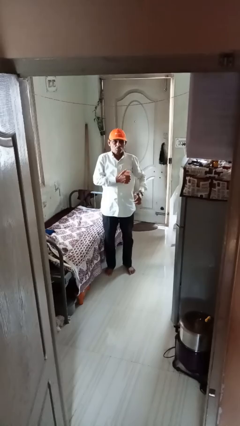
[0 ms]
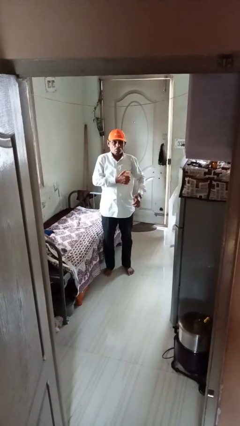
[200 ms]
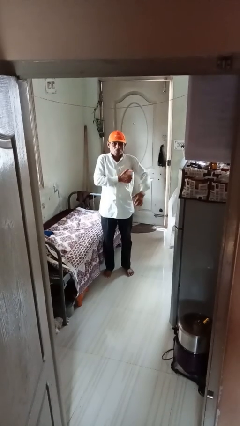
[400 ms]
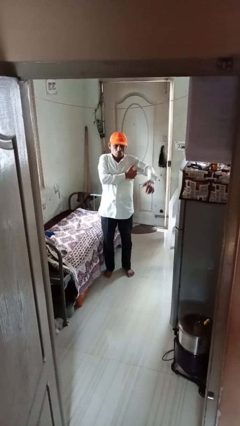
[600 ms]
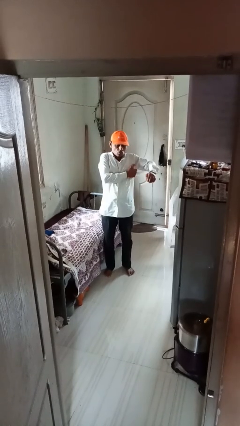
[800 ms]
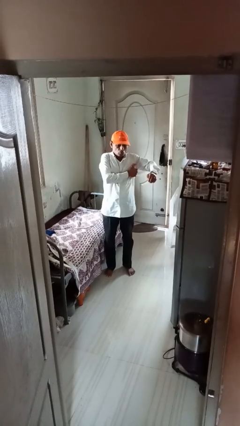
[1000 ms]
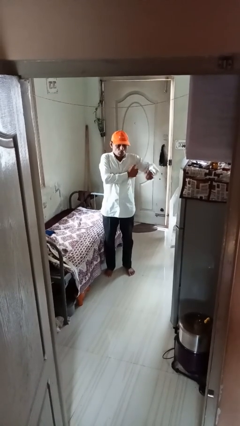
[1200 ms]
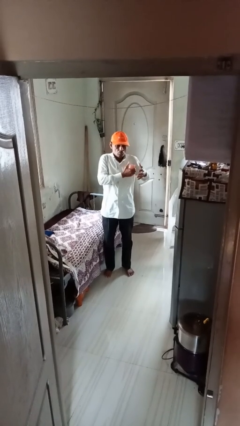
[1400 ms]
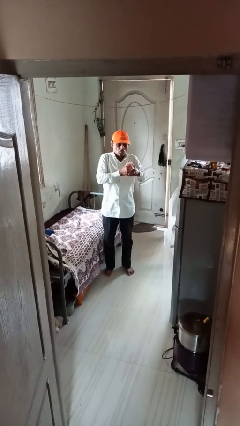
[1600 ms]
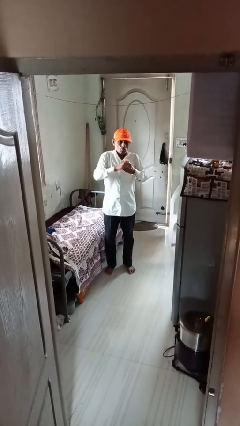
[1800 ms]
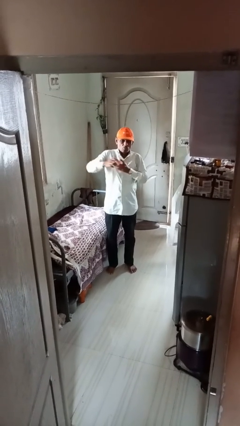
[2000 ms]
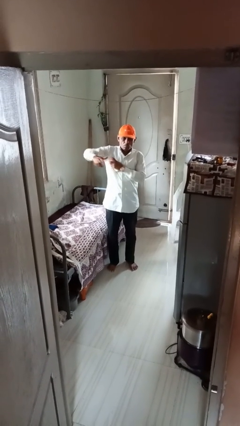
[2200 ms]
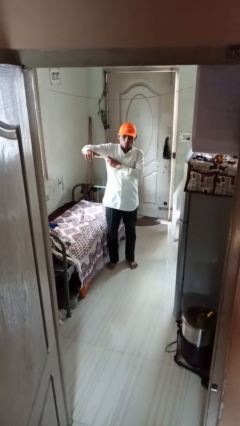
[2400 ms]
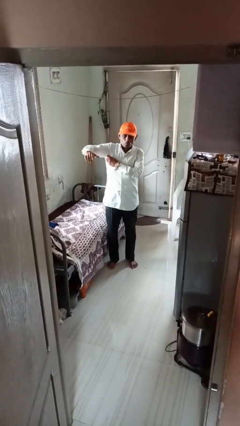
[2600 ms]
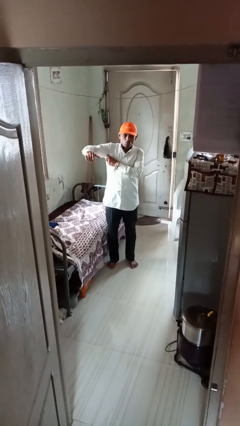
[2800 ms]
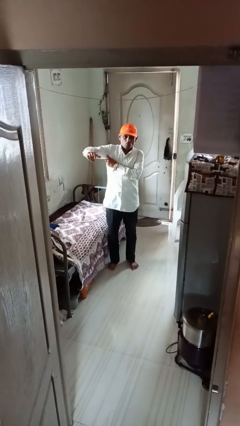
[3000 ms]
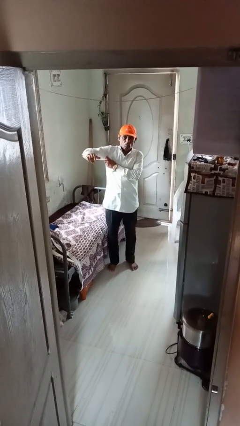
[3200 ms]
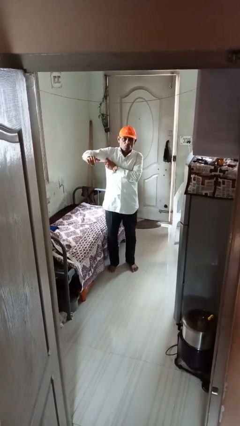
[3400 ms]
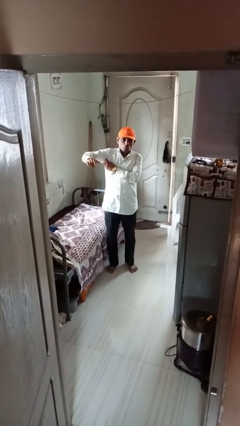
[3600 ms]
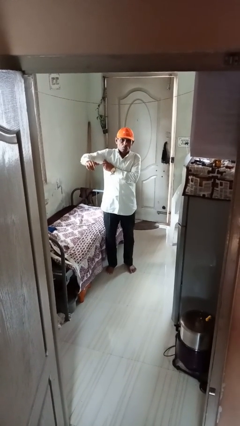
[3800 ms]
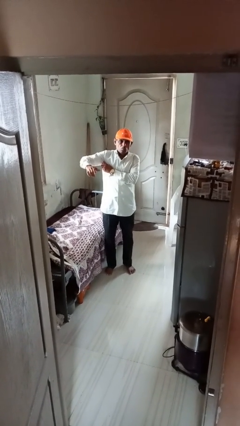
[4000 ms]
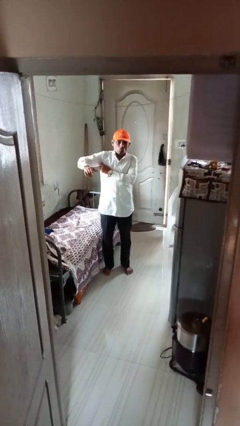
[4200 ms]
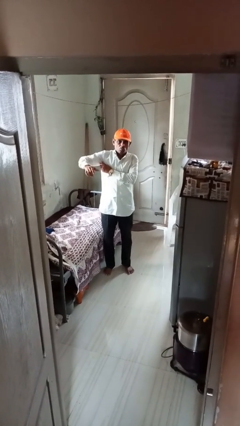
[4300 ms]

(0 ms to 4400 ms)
person applies deodorant

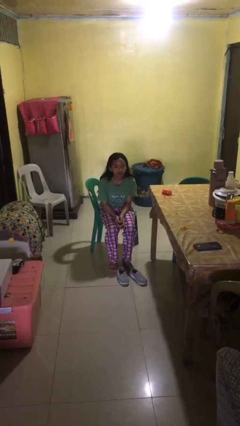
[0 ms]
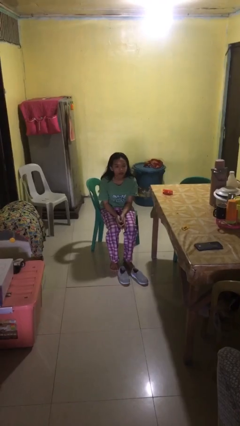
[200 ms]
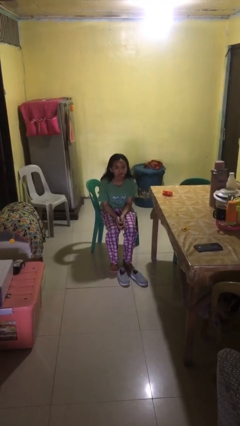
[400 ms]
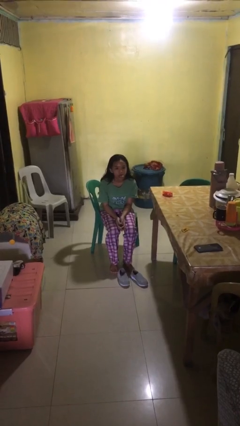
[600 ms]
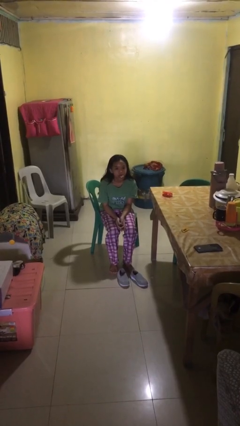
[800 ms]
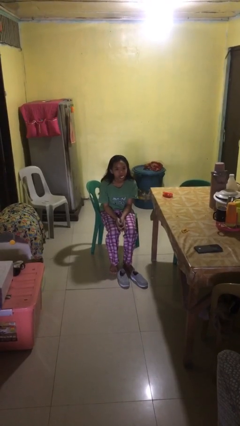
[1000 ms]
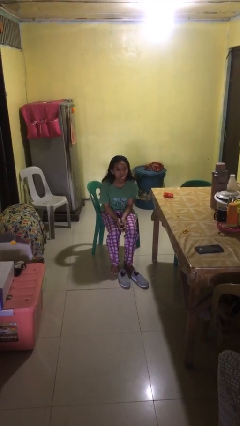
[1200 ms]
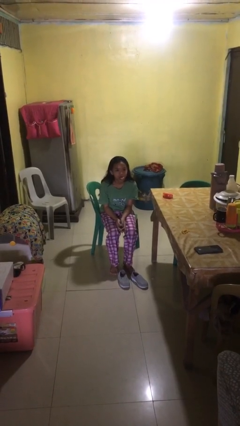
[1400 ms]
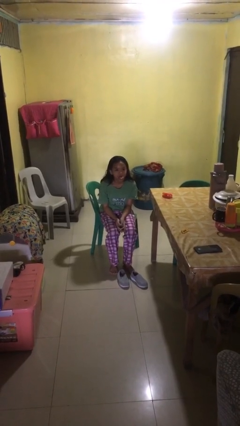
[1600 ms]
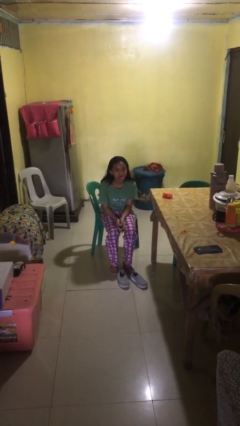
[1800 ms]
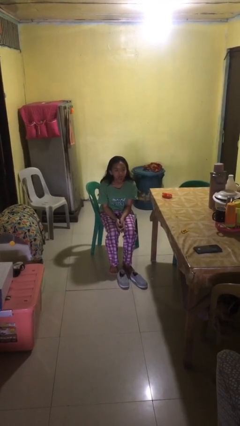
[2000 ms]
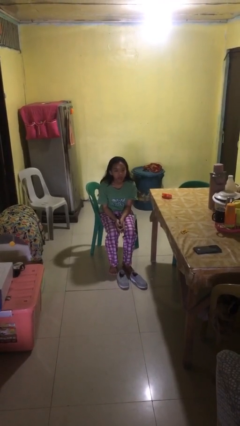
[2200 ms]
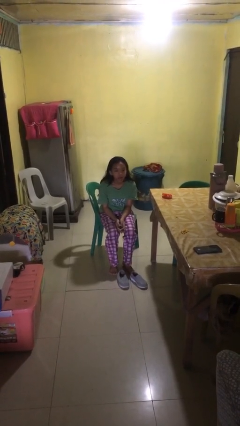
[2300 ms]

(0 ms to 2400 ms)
person sticks out tongue

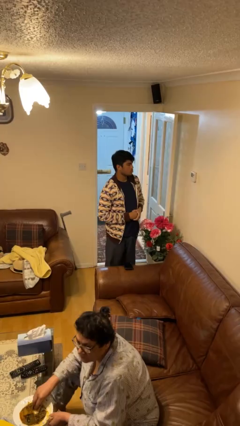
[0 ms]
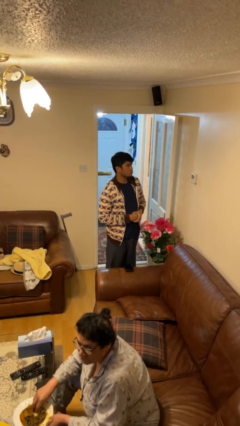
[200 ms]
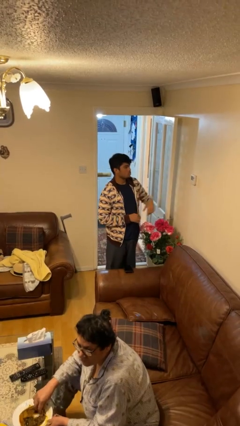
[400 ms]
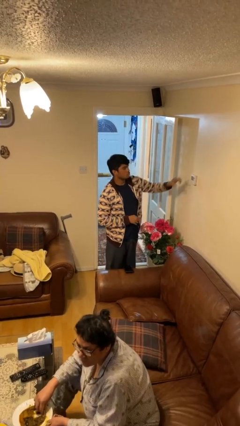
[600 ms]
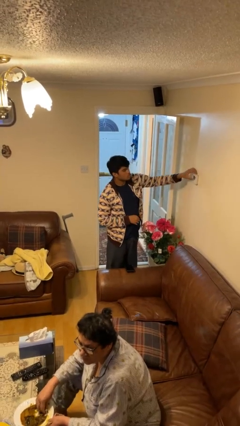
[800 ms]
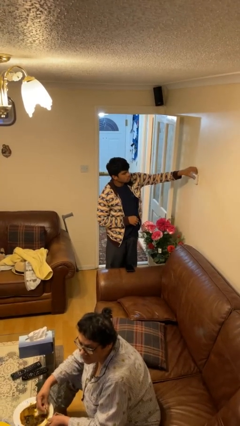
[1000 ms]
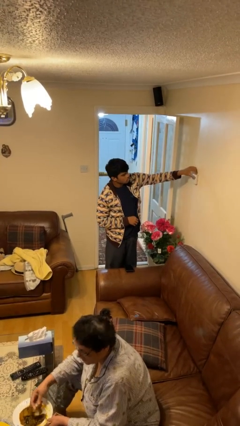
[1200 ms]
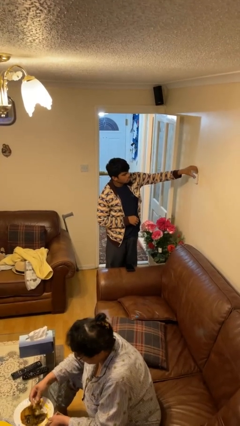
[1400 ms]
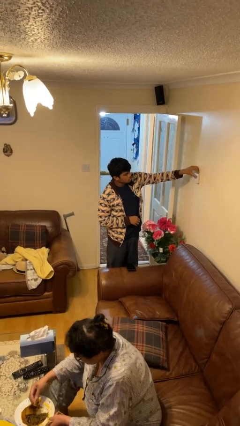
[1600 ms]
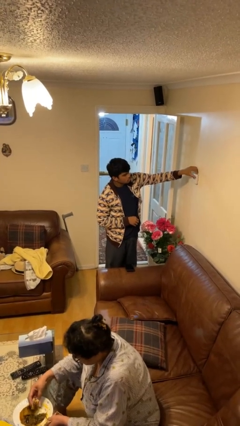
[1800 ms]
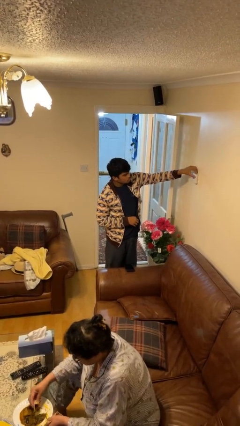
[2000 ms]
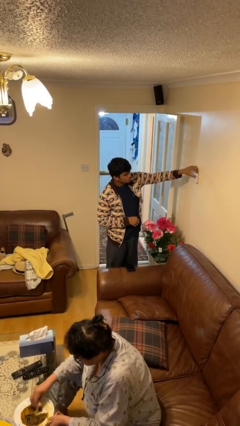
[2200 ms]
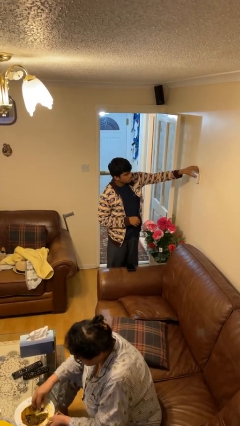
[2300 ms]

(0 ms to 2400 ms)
person adjusts thermostat

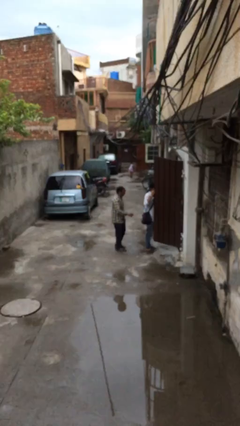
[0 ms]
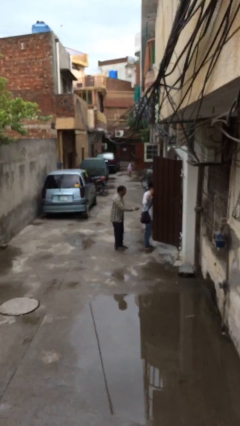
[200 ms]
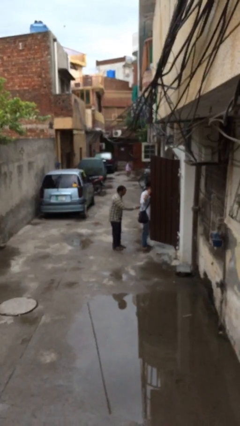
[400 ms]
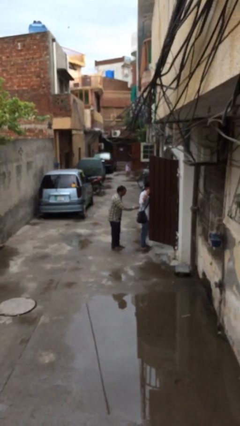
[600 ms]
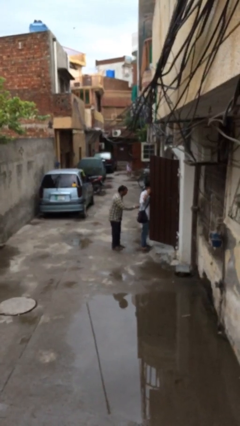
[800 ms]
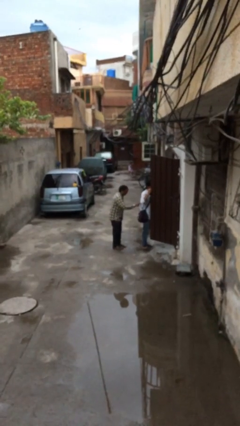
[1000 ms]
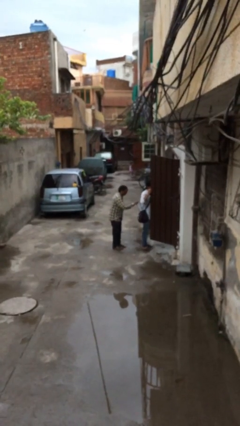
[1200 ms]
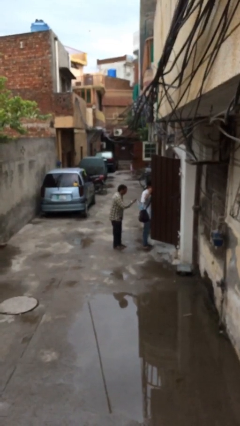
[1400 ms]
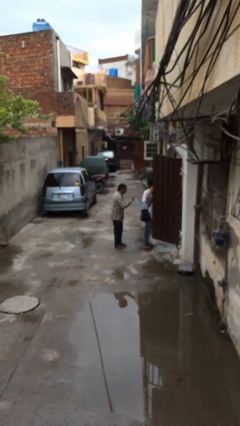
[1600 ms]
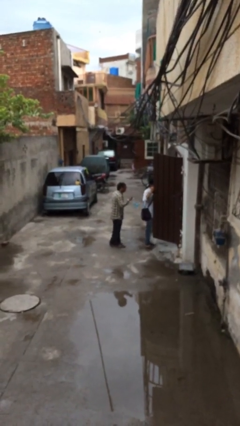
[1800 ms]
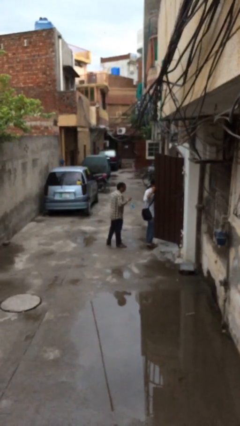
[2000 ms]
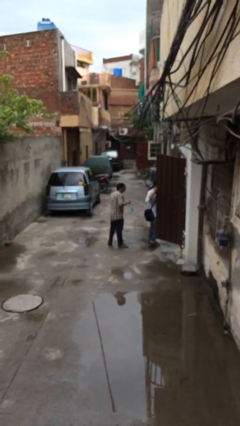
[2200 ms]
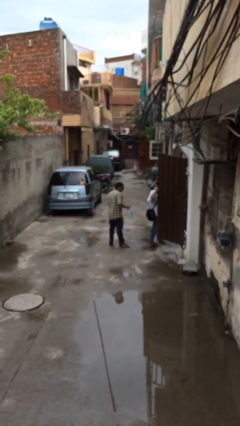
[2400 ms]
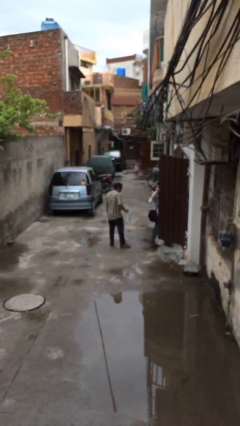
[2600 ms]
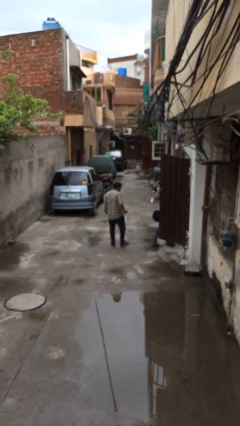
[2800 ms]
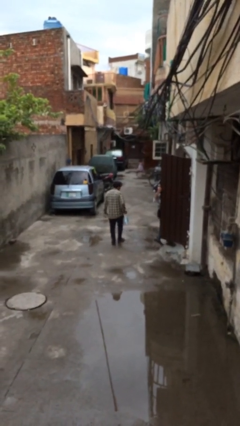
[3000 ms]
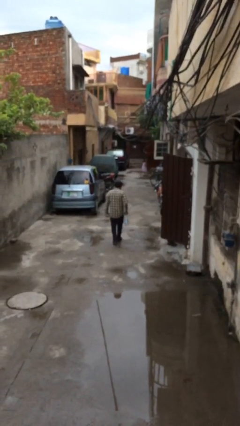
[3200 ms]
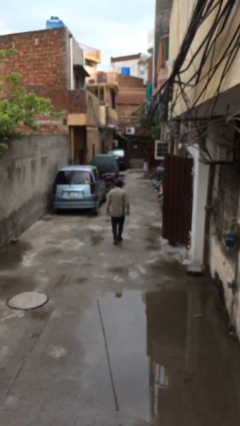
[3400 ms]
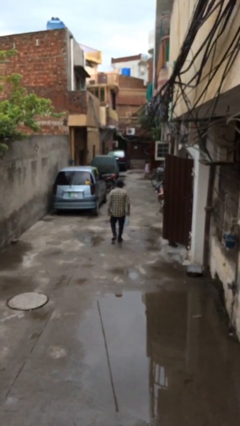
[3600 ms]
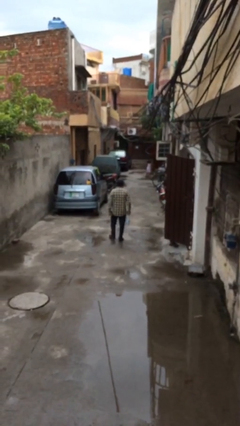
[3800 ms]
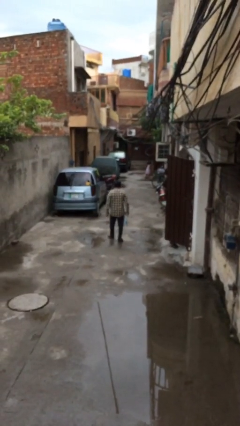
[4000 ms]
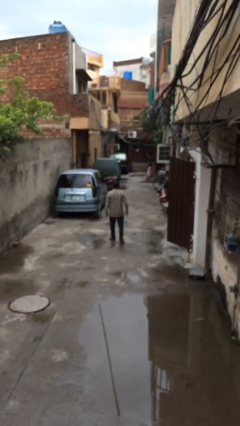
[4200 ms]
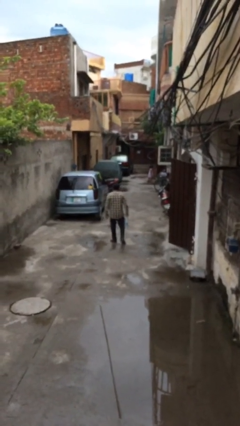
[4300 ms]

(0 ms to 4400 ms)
person steals object from person

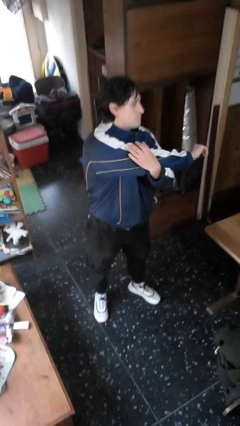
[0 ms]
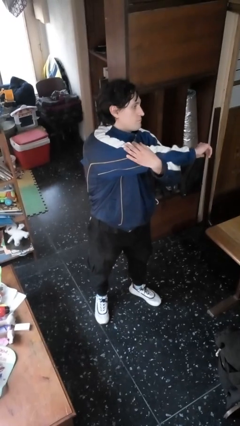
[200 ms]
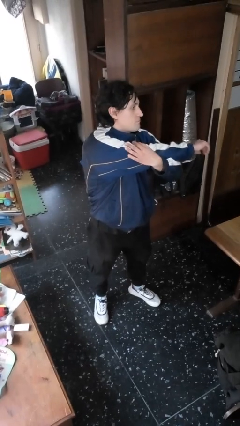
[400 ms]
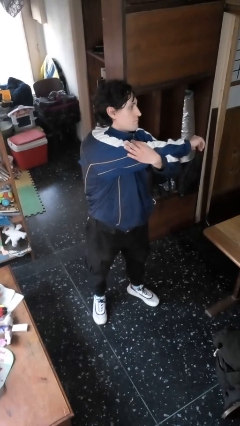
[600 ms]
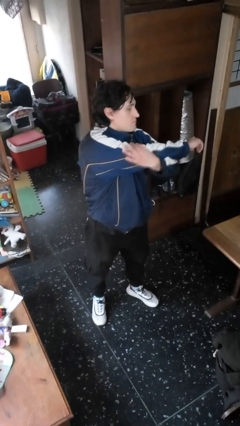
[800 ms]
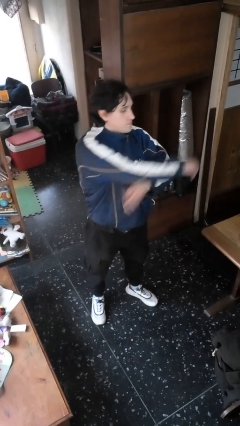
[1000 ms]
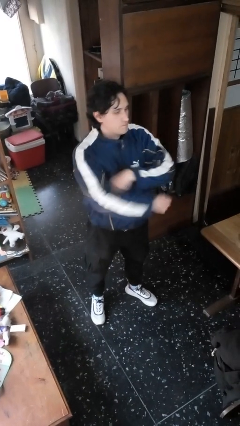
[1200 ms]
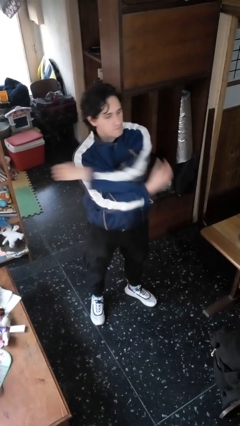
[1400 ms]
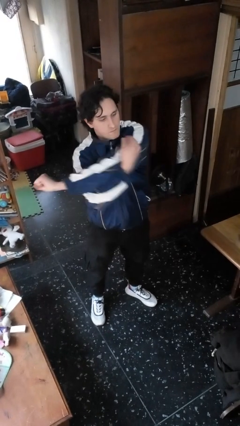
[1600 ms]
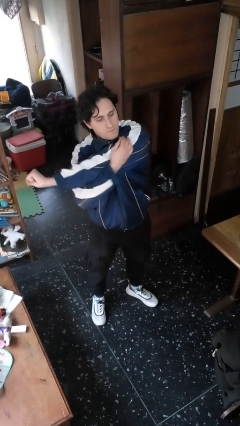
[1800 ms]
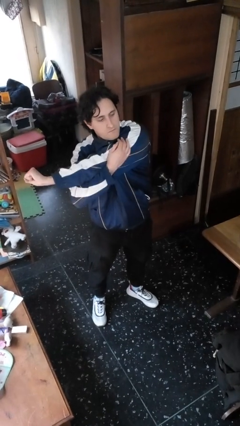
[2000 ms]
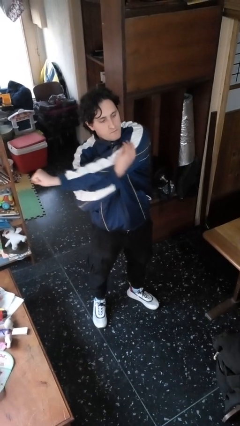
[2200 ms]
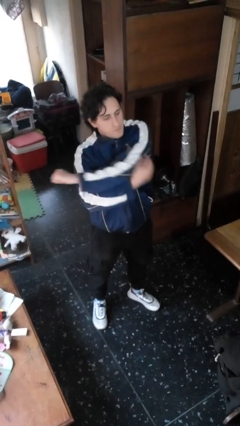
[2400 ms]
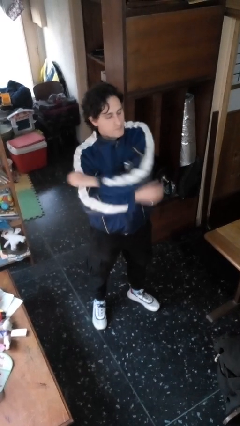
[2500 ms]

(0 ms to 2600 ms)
person stretches arms to side

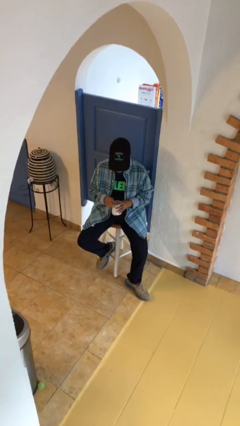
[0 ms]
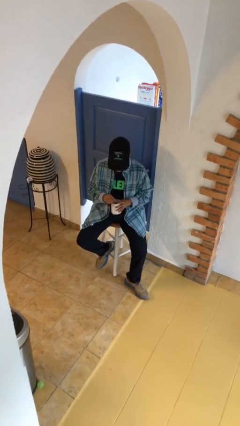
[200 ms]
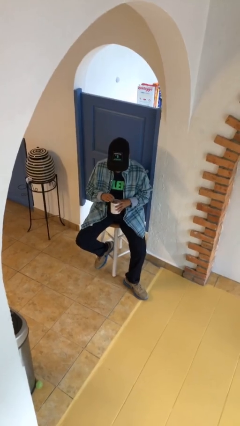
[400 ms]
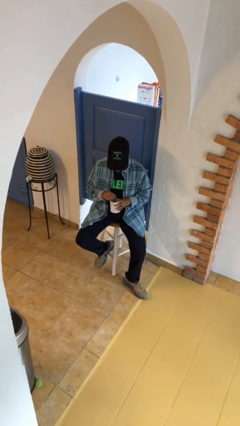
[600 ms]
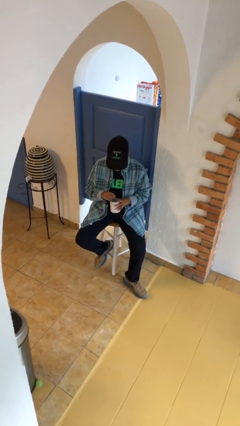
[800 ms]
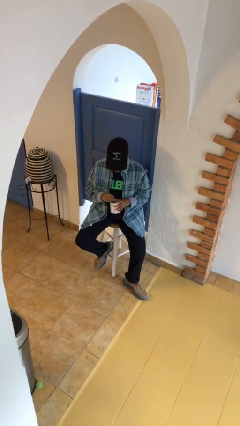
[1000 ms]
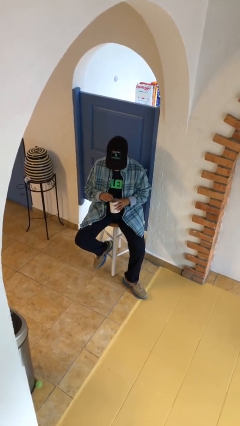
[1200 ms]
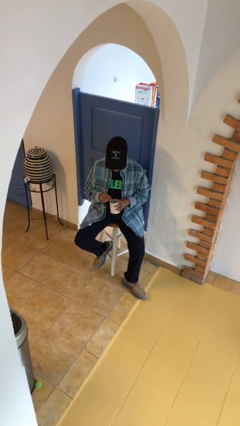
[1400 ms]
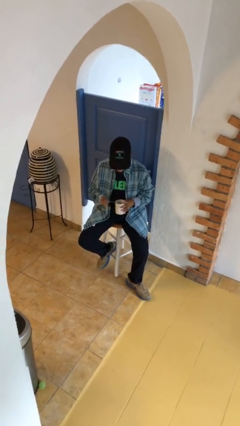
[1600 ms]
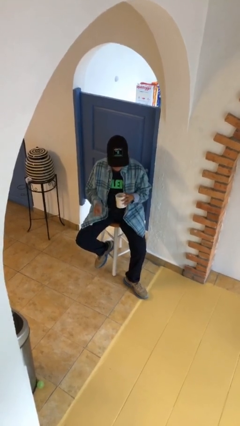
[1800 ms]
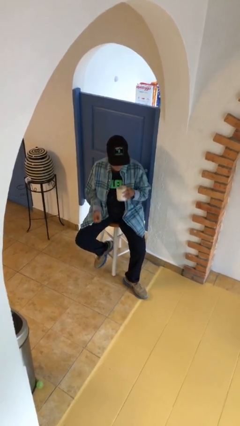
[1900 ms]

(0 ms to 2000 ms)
person stirs mug
